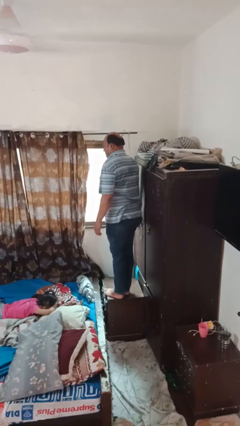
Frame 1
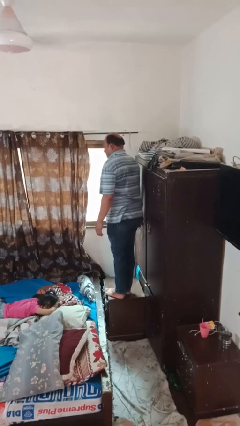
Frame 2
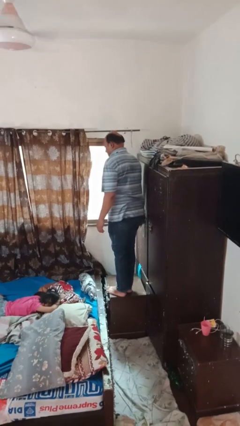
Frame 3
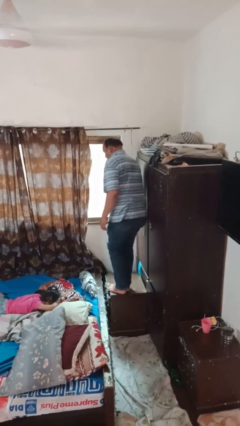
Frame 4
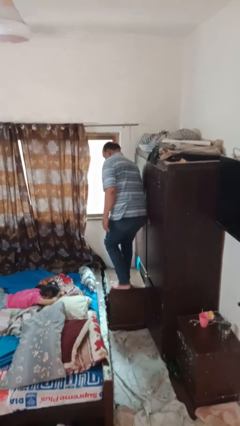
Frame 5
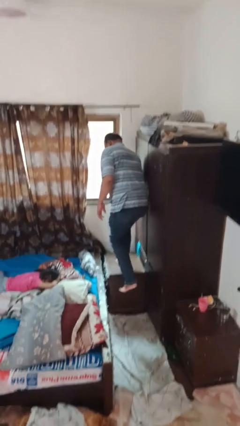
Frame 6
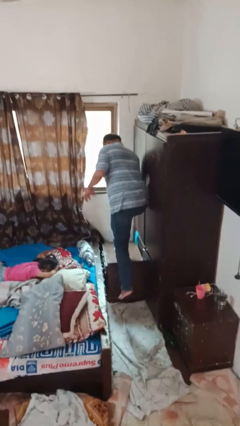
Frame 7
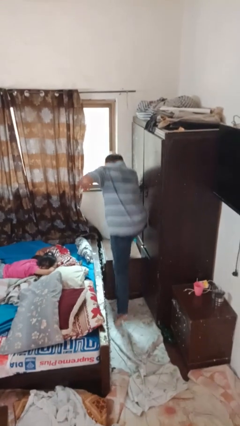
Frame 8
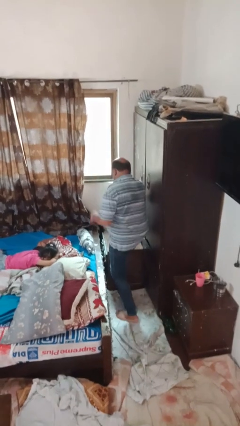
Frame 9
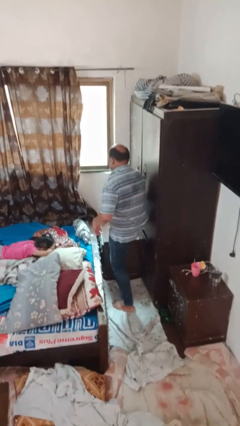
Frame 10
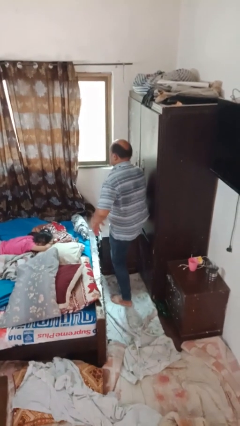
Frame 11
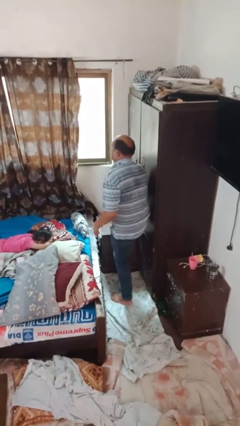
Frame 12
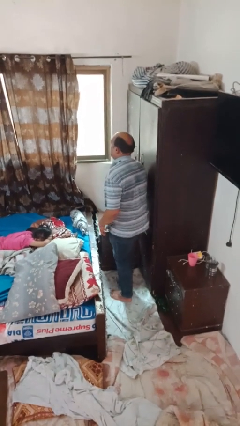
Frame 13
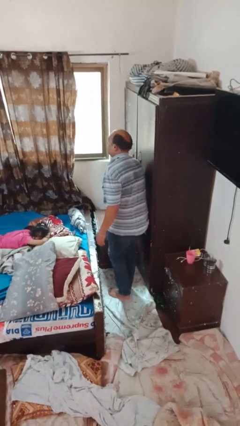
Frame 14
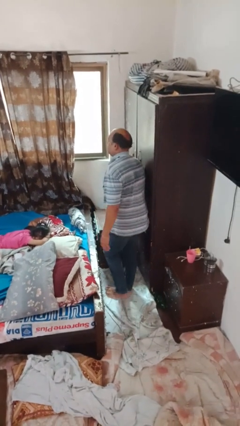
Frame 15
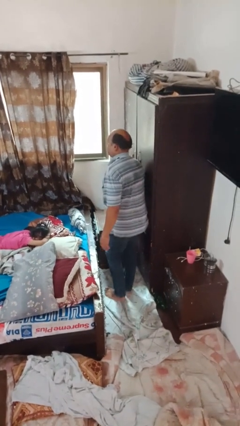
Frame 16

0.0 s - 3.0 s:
person climbs off table

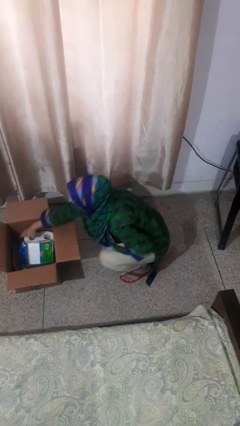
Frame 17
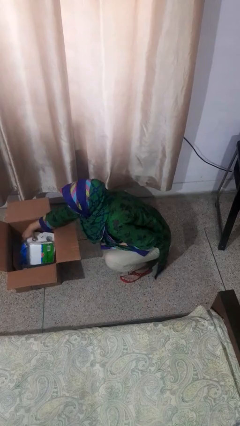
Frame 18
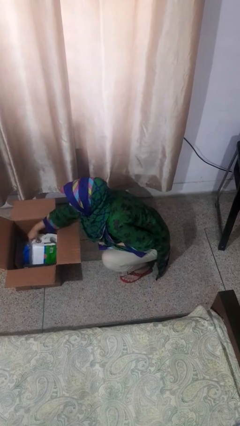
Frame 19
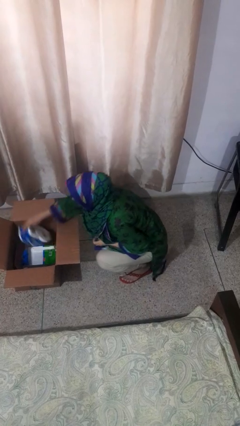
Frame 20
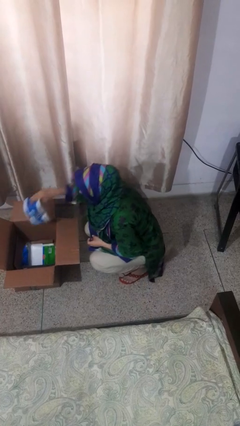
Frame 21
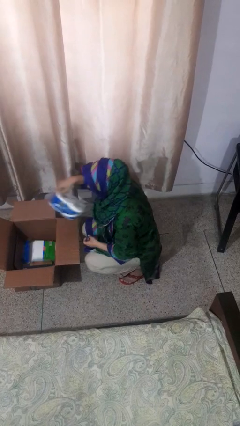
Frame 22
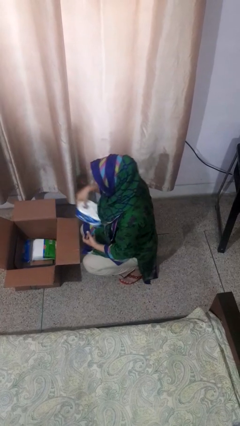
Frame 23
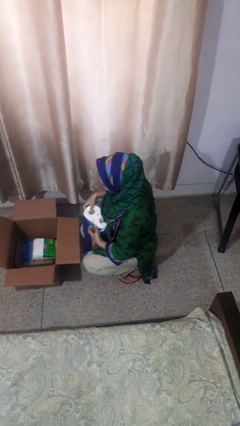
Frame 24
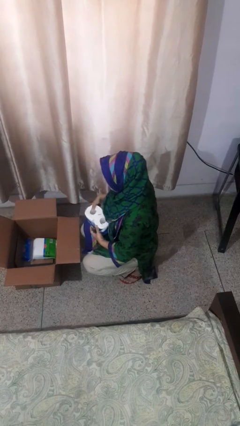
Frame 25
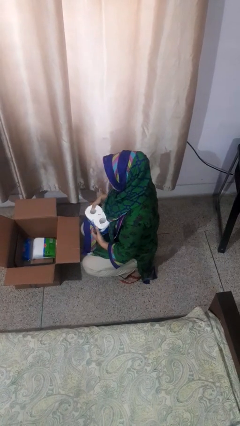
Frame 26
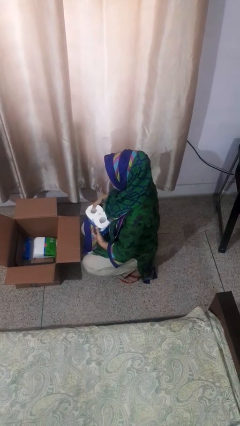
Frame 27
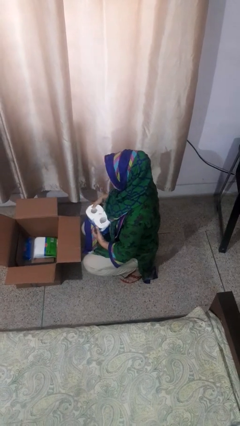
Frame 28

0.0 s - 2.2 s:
person takes object from box

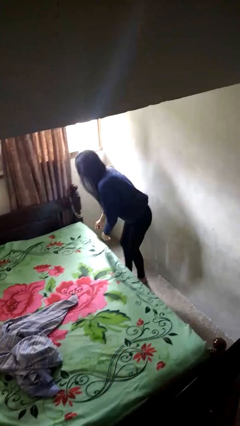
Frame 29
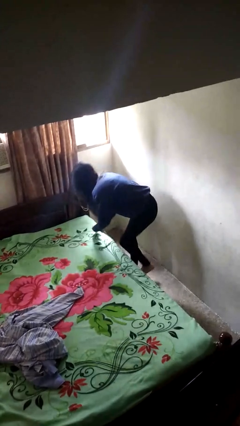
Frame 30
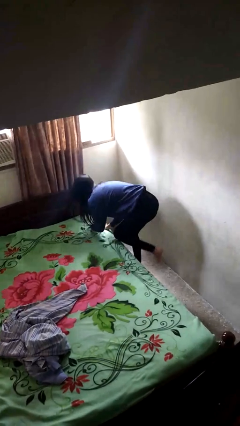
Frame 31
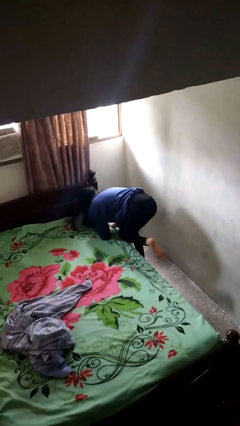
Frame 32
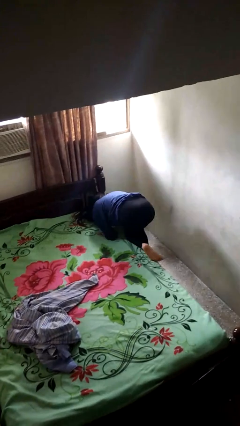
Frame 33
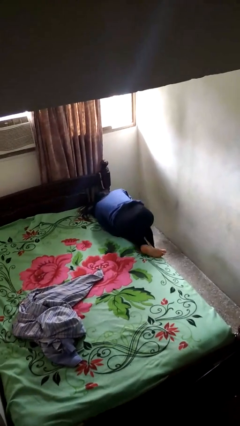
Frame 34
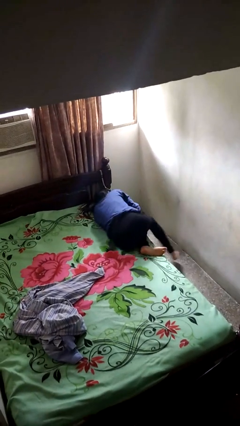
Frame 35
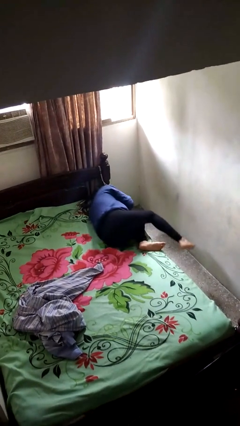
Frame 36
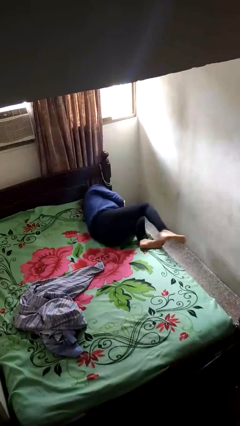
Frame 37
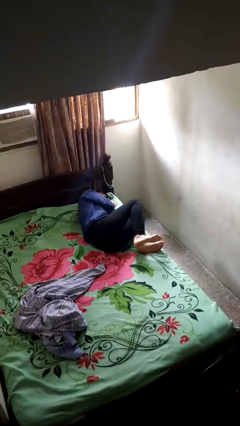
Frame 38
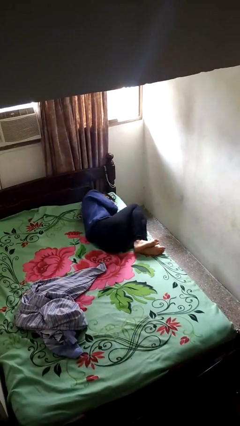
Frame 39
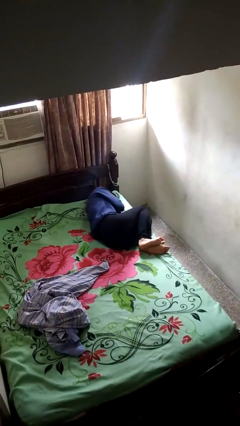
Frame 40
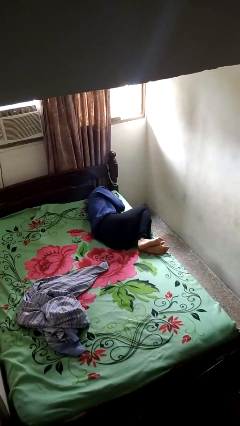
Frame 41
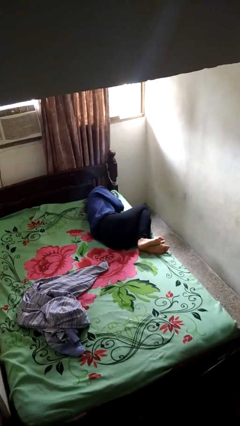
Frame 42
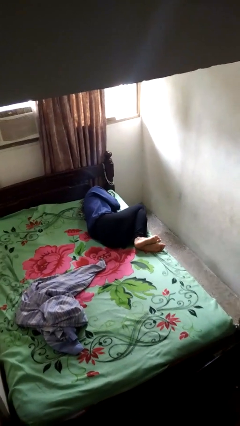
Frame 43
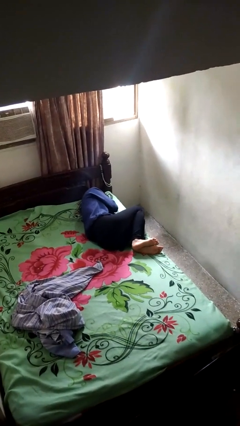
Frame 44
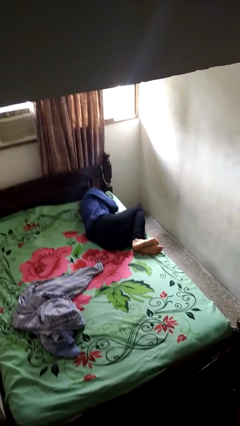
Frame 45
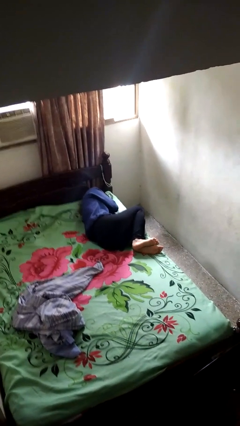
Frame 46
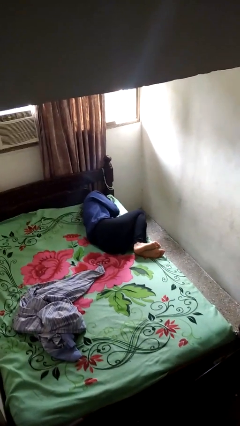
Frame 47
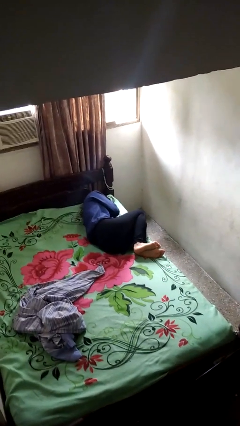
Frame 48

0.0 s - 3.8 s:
person lies down on bed

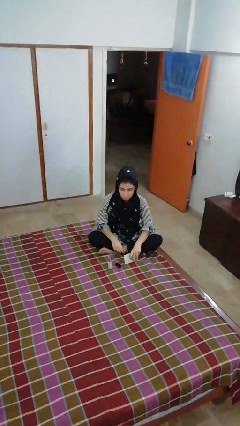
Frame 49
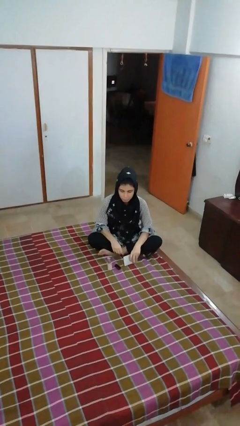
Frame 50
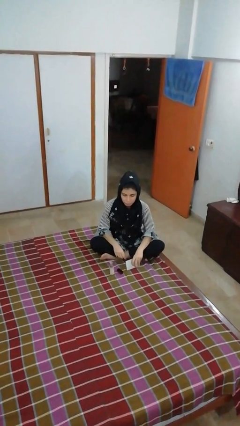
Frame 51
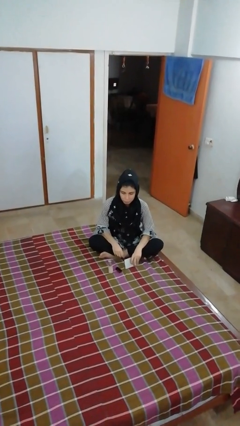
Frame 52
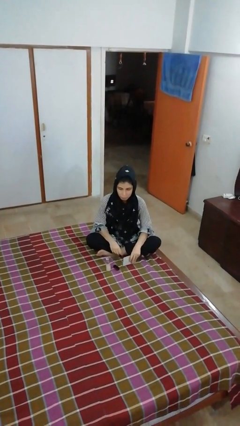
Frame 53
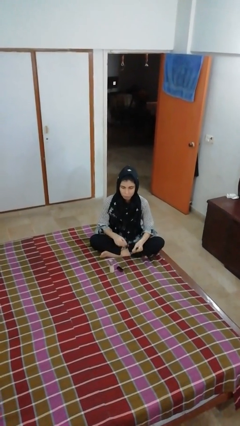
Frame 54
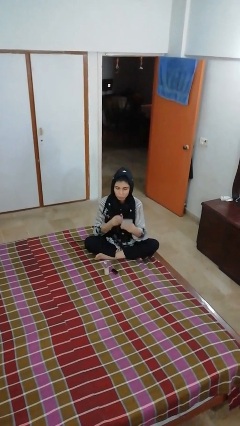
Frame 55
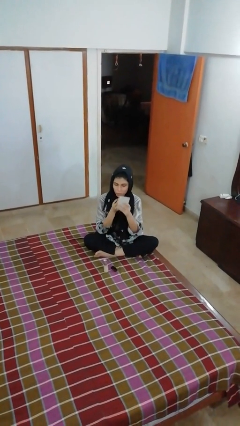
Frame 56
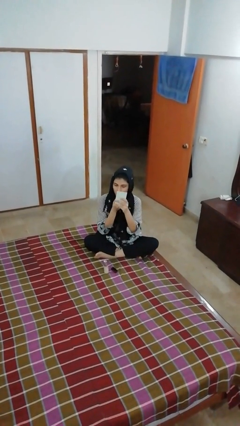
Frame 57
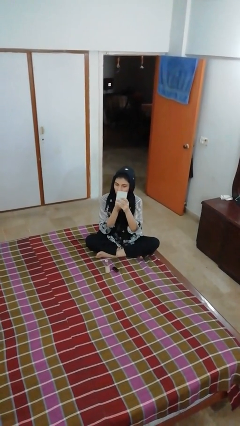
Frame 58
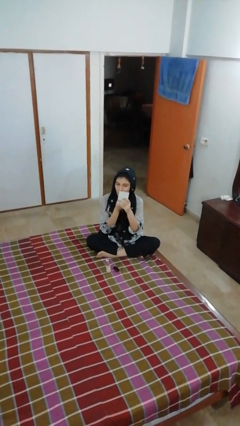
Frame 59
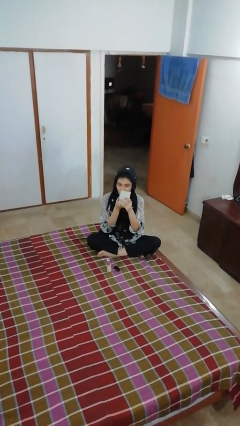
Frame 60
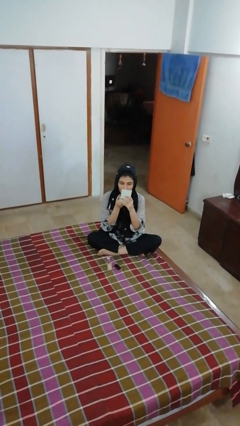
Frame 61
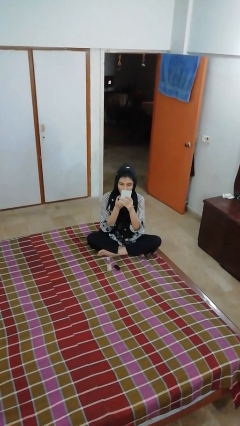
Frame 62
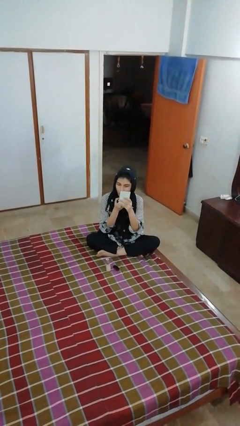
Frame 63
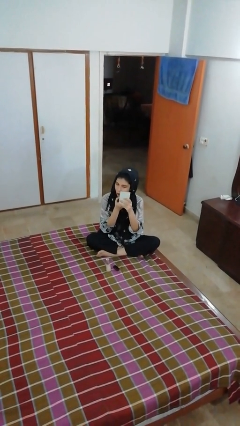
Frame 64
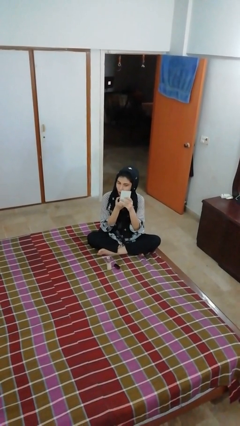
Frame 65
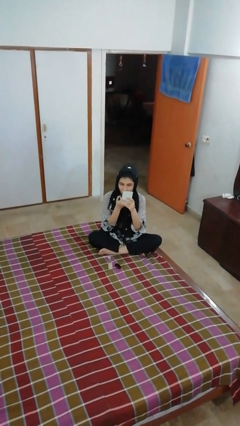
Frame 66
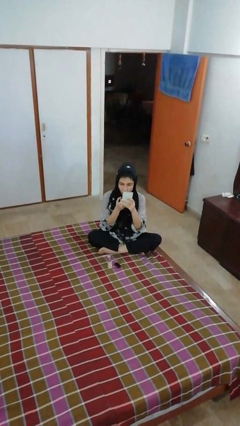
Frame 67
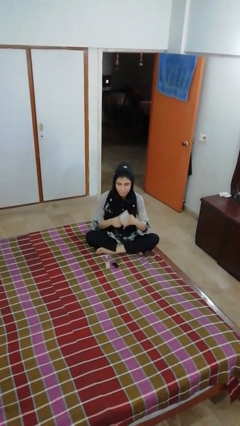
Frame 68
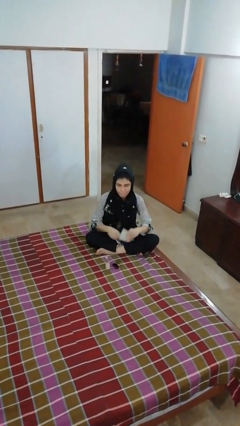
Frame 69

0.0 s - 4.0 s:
person applies lip makeup

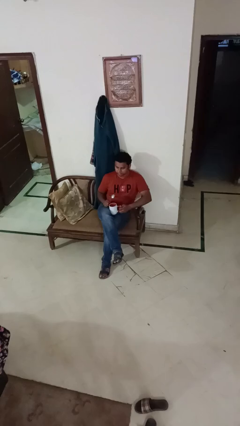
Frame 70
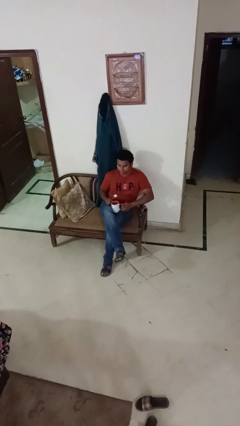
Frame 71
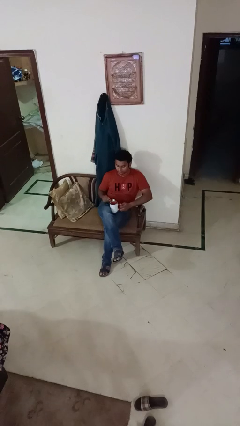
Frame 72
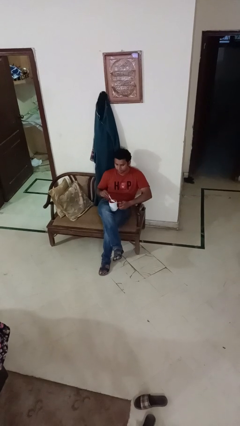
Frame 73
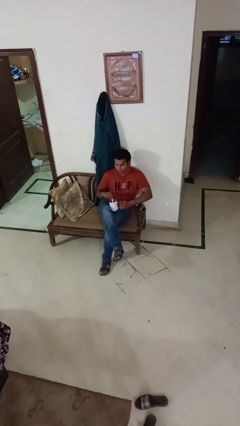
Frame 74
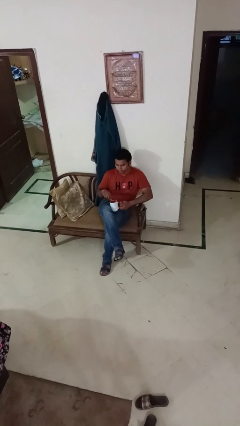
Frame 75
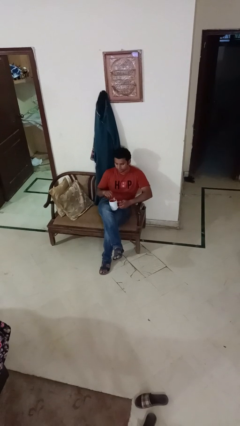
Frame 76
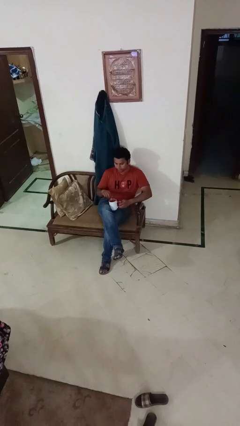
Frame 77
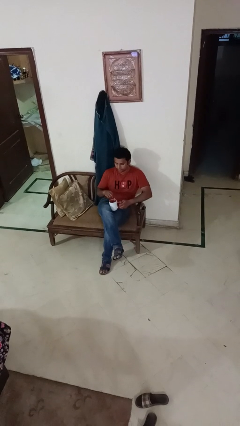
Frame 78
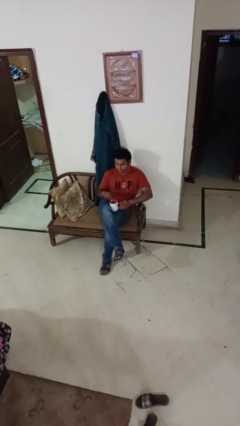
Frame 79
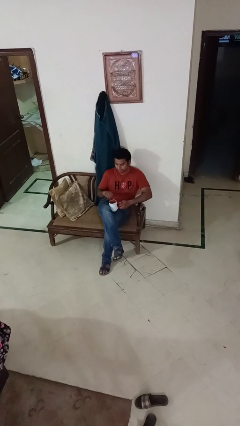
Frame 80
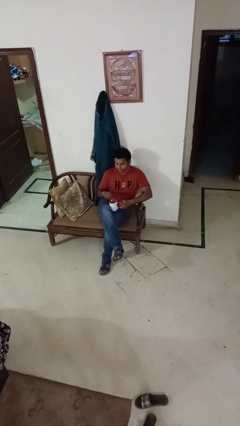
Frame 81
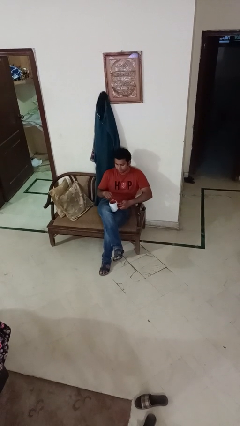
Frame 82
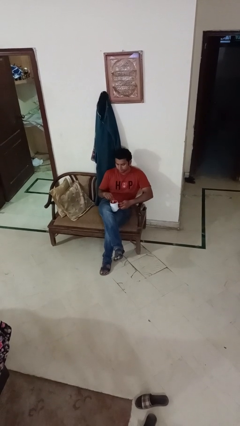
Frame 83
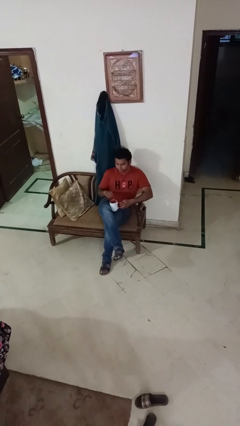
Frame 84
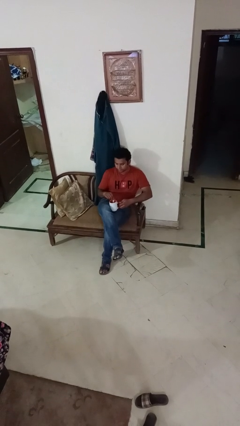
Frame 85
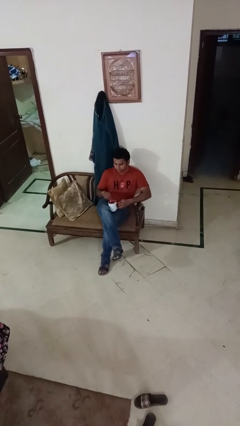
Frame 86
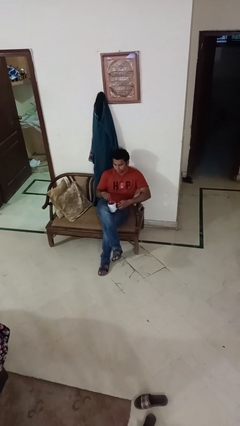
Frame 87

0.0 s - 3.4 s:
person stirs mug

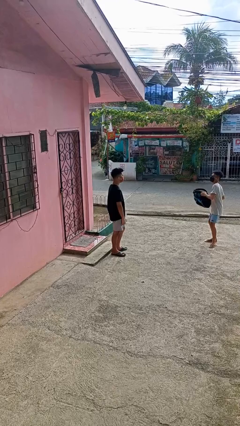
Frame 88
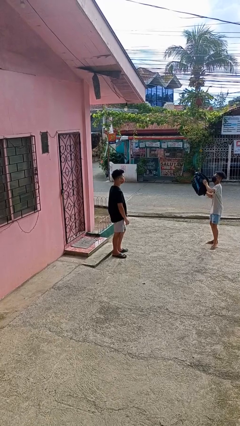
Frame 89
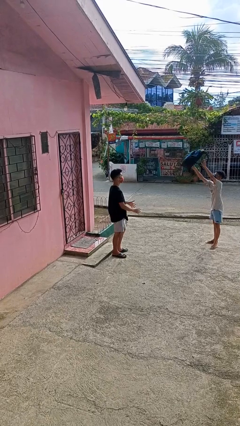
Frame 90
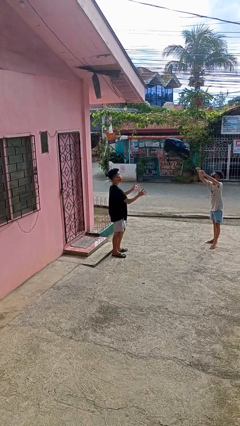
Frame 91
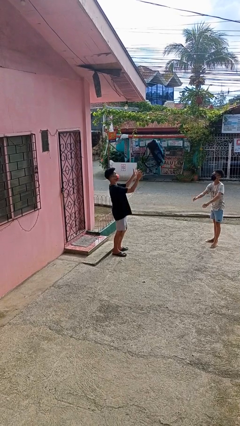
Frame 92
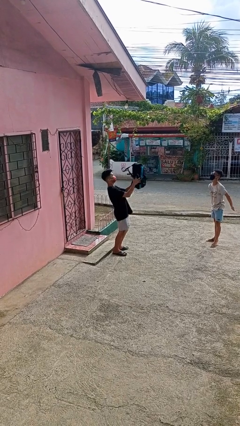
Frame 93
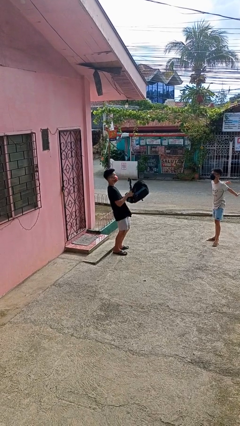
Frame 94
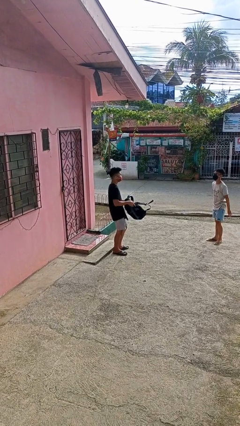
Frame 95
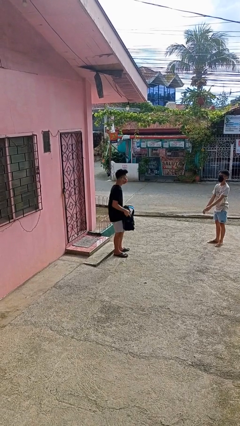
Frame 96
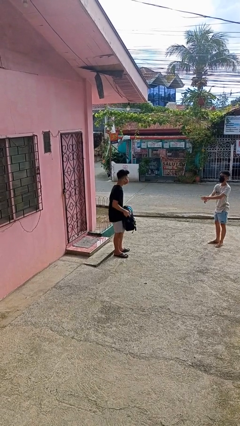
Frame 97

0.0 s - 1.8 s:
person catches object from person
